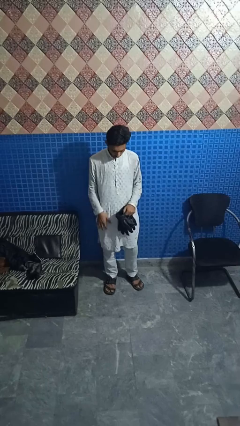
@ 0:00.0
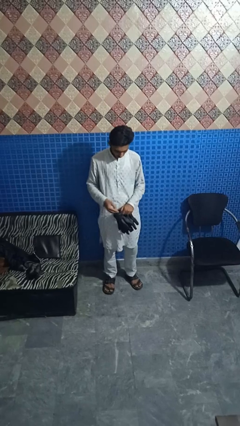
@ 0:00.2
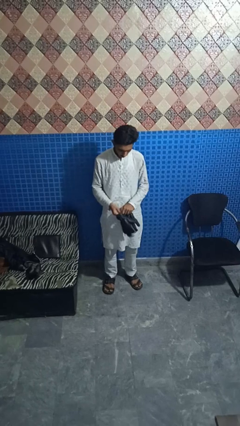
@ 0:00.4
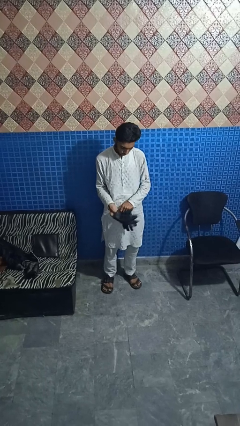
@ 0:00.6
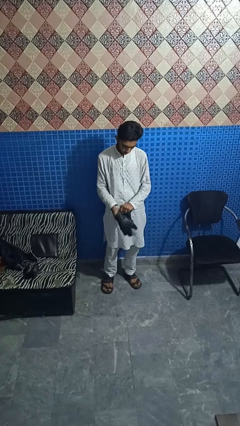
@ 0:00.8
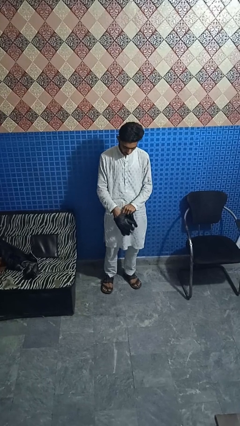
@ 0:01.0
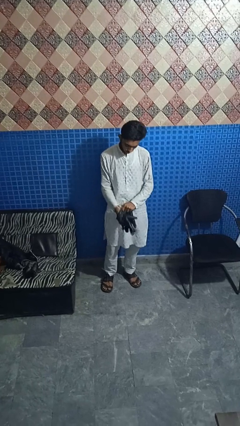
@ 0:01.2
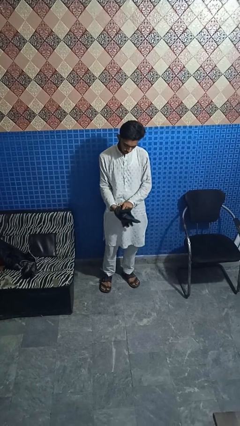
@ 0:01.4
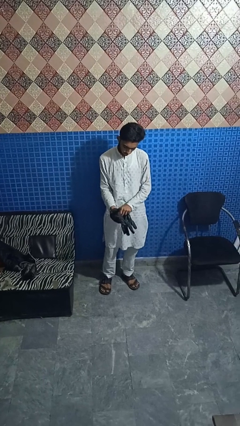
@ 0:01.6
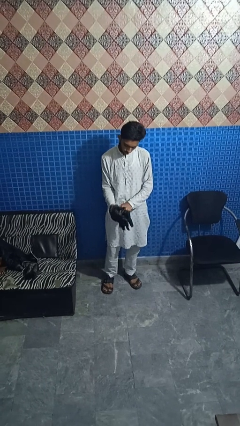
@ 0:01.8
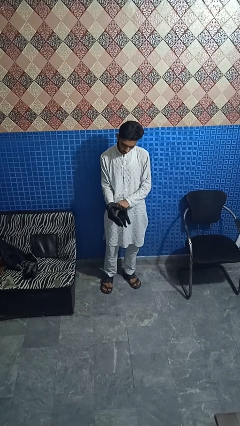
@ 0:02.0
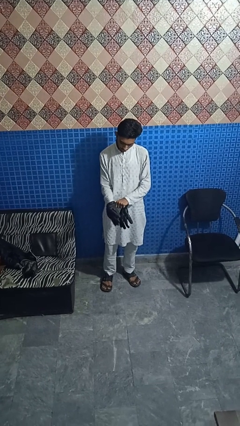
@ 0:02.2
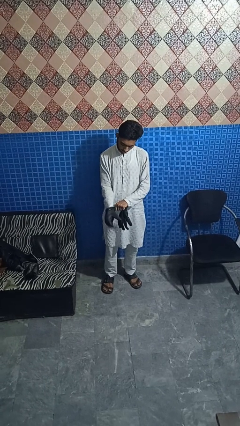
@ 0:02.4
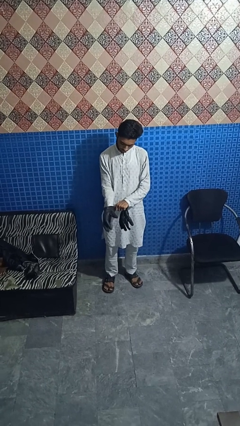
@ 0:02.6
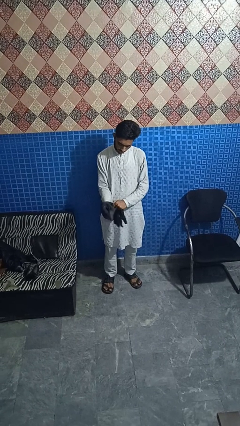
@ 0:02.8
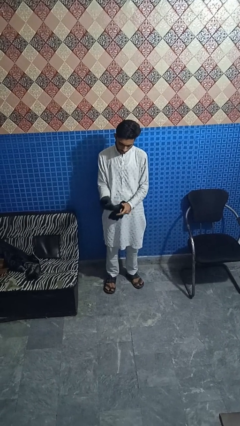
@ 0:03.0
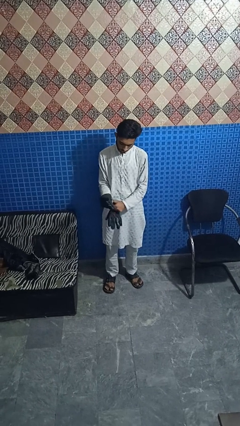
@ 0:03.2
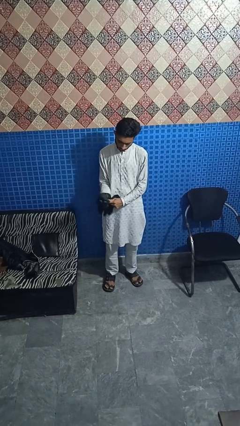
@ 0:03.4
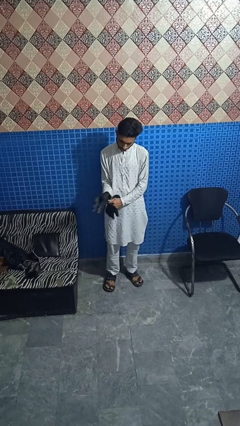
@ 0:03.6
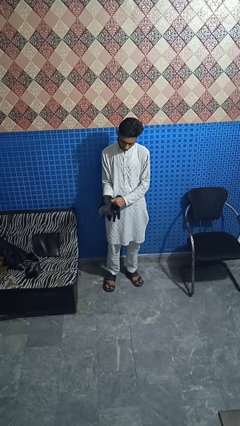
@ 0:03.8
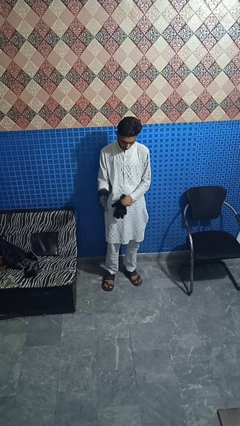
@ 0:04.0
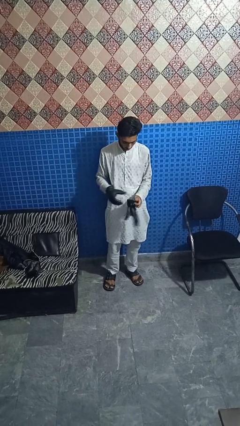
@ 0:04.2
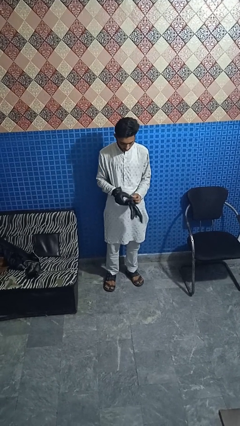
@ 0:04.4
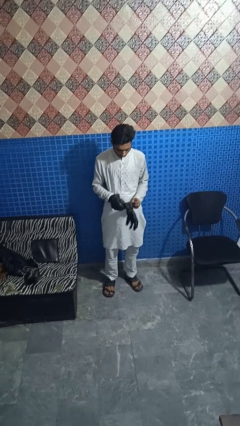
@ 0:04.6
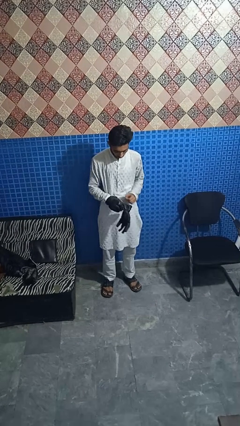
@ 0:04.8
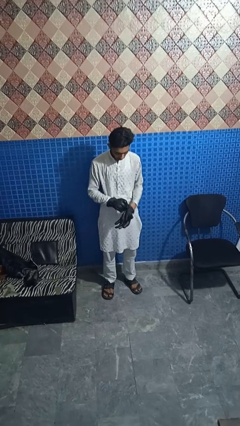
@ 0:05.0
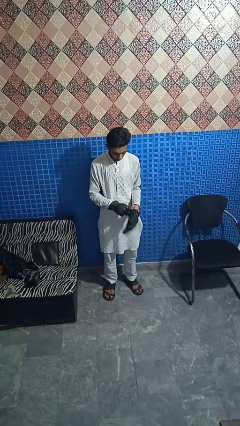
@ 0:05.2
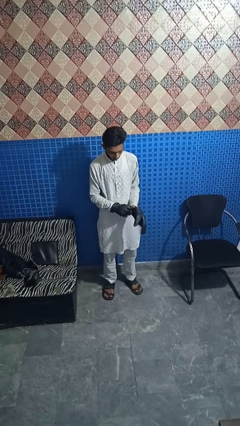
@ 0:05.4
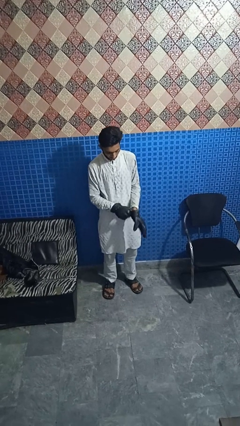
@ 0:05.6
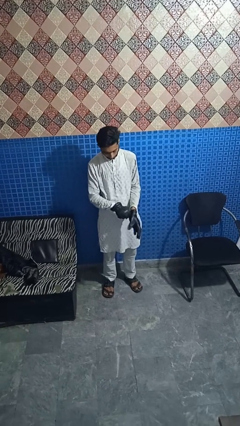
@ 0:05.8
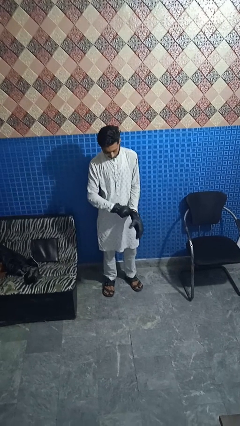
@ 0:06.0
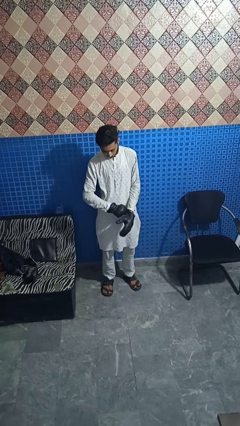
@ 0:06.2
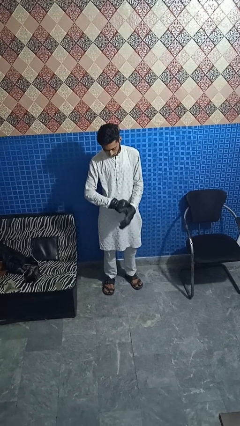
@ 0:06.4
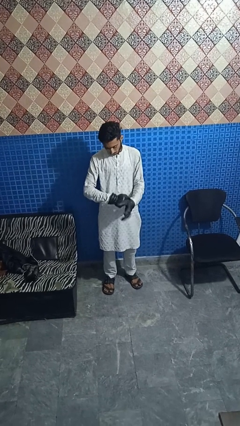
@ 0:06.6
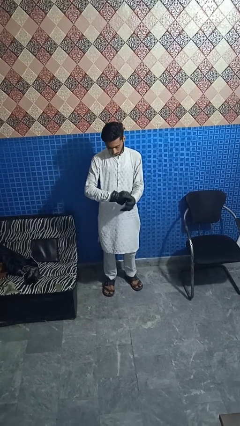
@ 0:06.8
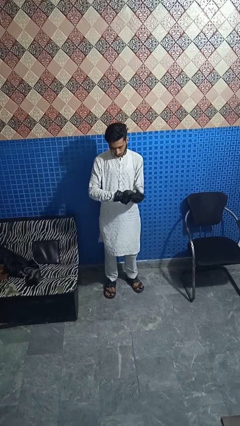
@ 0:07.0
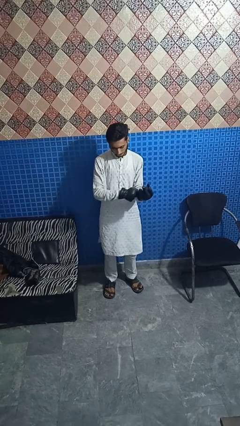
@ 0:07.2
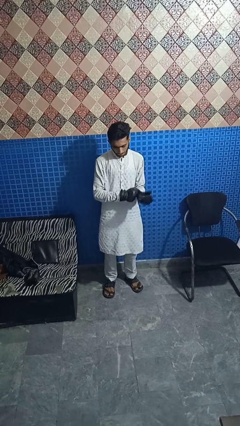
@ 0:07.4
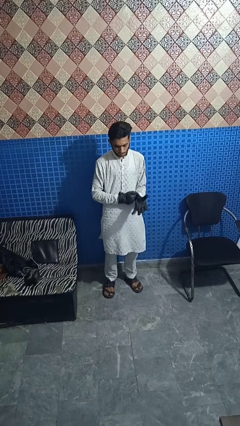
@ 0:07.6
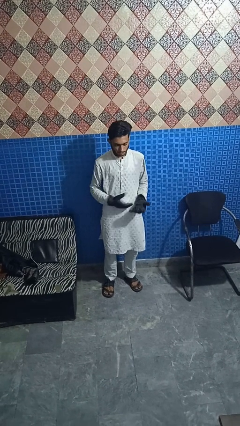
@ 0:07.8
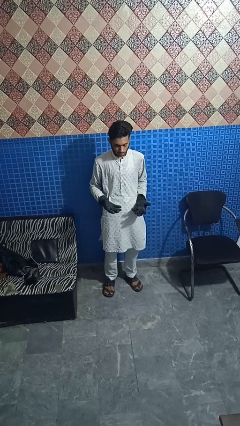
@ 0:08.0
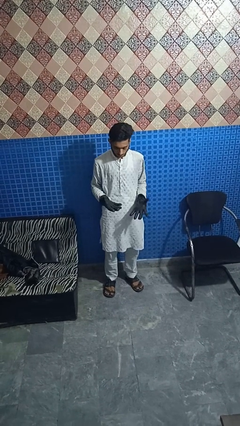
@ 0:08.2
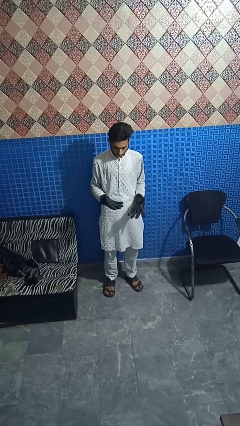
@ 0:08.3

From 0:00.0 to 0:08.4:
person puts on gloves

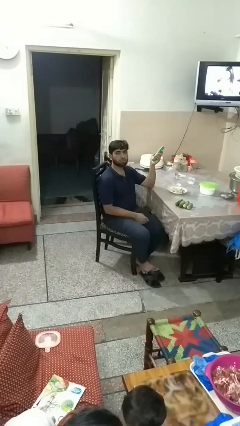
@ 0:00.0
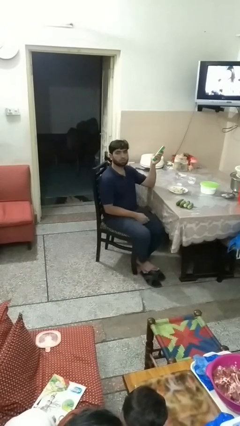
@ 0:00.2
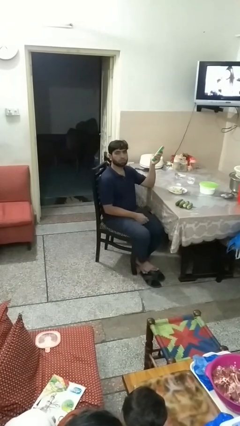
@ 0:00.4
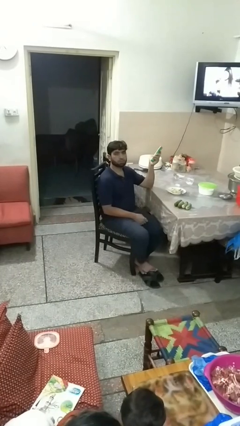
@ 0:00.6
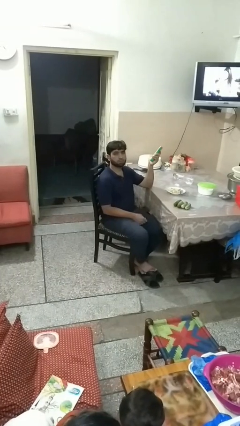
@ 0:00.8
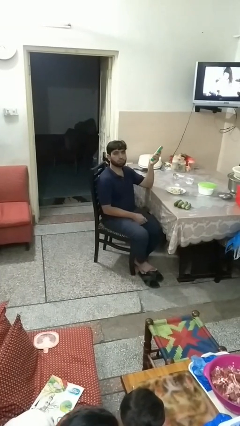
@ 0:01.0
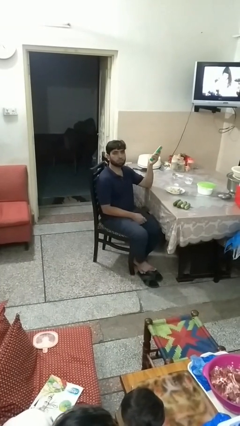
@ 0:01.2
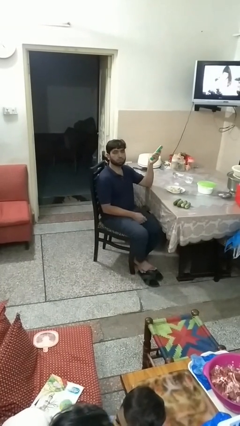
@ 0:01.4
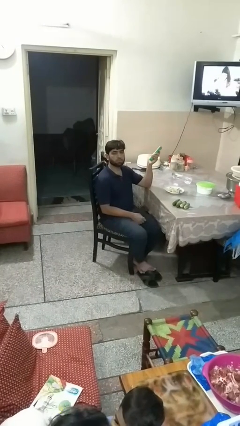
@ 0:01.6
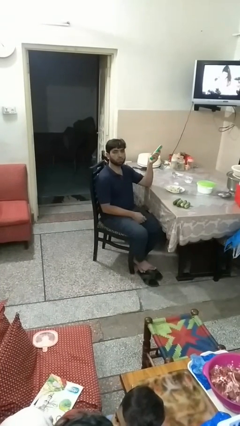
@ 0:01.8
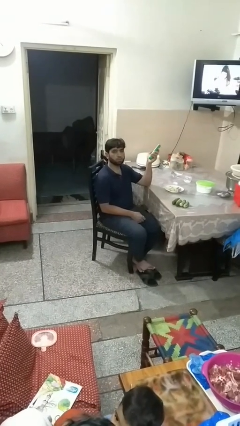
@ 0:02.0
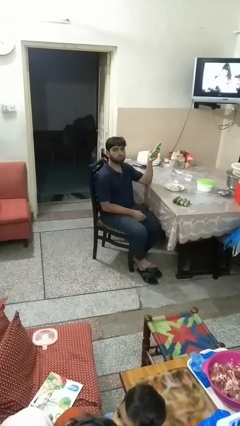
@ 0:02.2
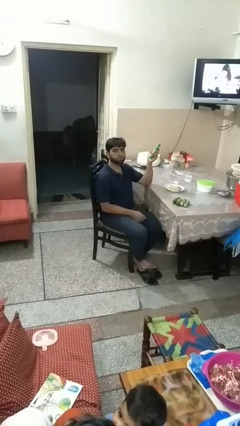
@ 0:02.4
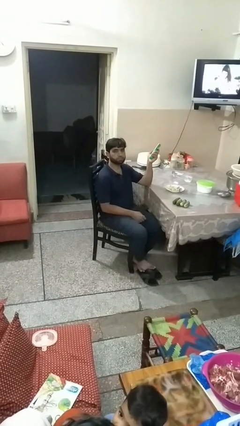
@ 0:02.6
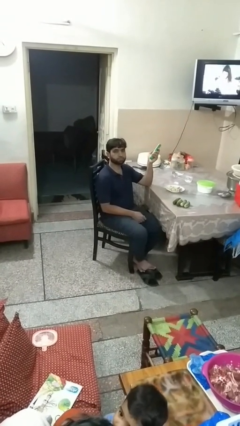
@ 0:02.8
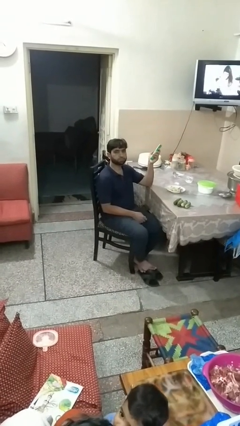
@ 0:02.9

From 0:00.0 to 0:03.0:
person uses television remote

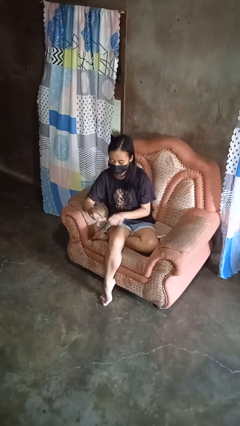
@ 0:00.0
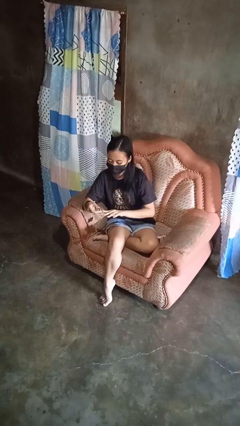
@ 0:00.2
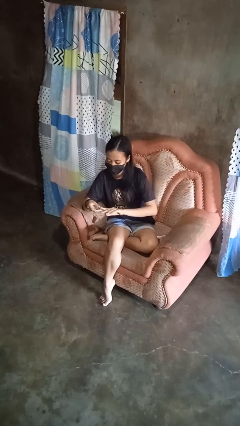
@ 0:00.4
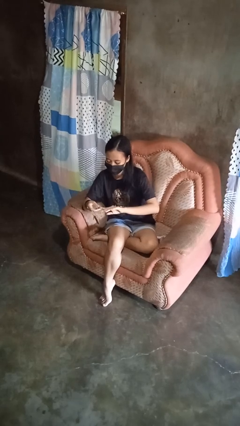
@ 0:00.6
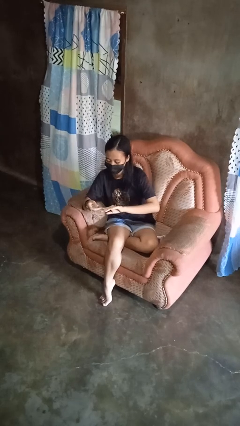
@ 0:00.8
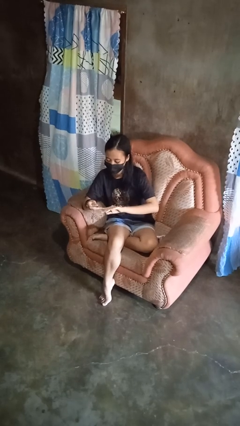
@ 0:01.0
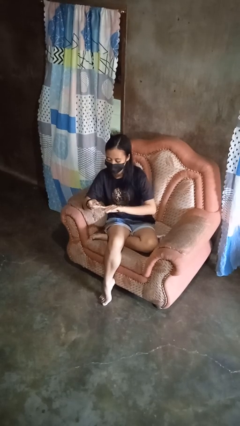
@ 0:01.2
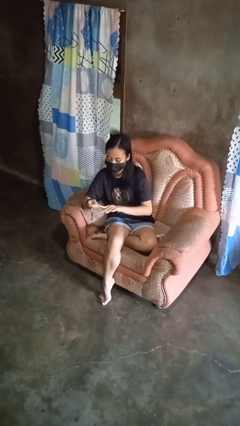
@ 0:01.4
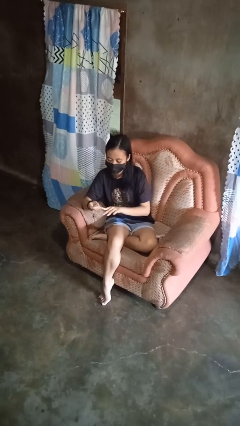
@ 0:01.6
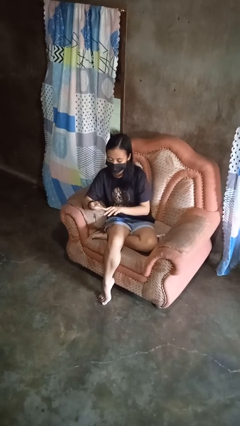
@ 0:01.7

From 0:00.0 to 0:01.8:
person clips fingernails

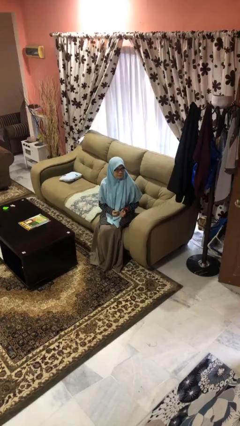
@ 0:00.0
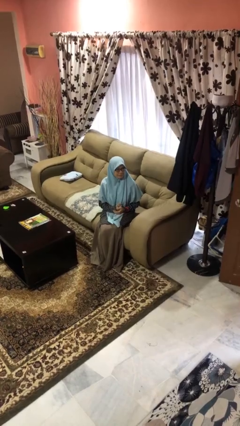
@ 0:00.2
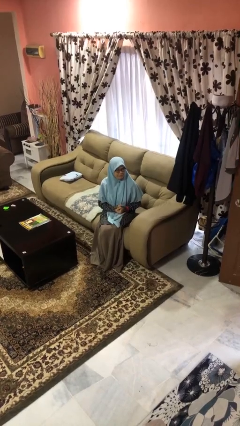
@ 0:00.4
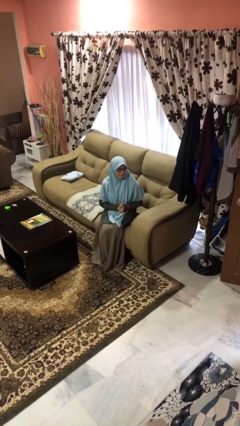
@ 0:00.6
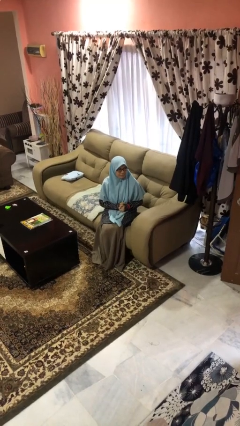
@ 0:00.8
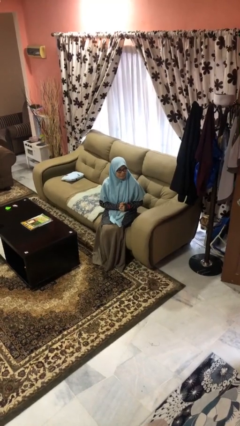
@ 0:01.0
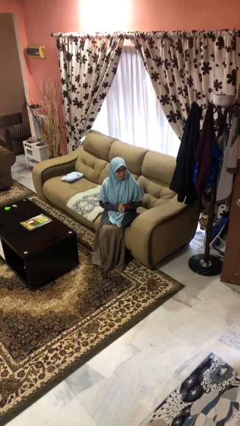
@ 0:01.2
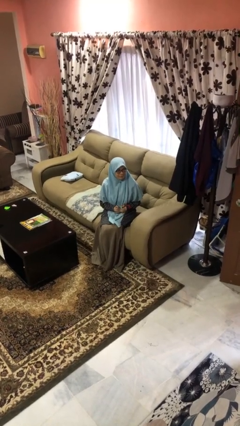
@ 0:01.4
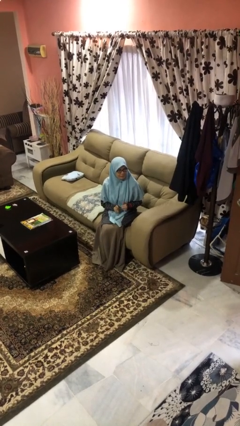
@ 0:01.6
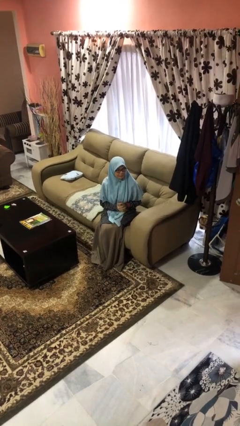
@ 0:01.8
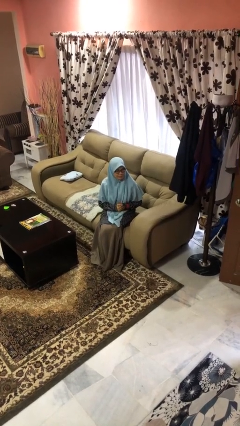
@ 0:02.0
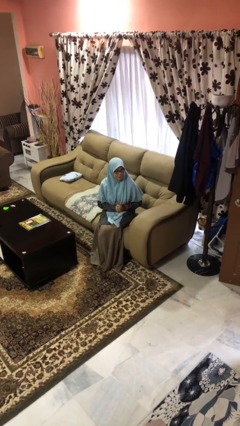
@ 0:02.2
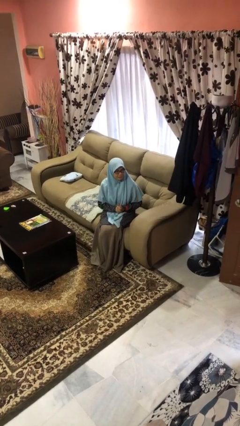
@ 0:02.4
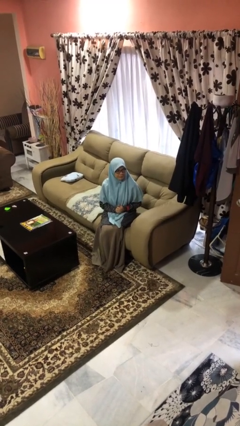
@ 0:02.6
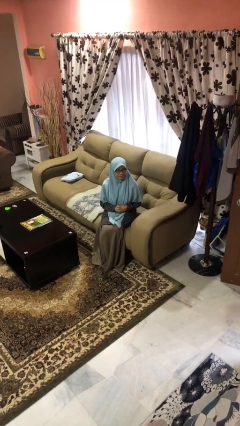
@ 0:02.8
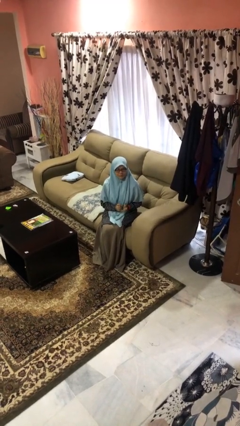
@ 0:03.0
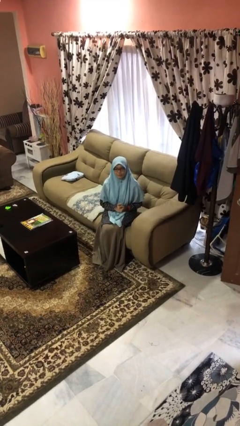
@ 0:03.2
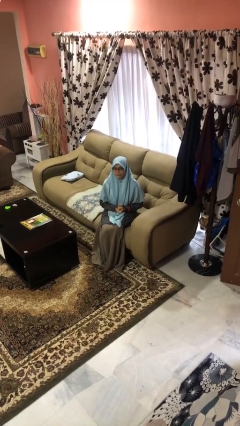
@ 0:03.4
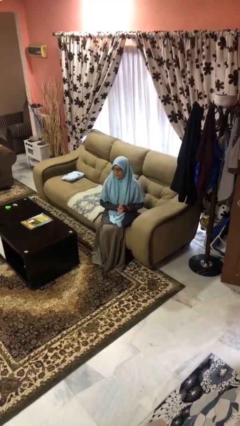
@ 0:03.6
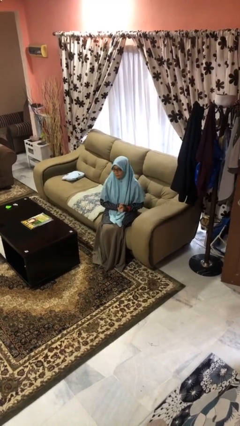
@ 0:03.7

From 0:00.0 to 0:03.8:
person cracks knuckles

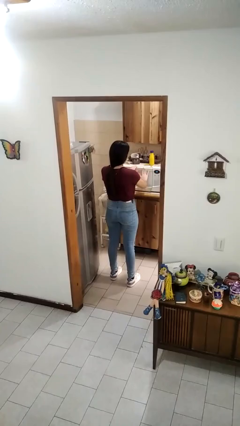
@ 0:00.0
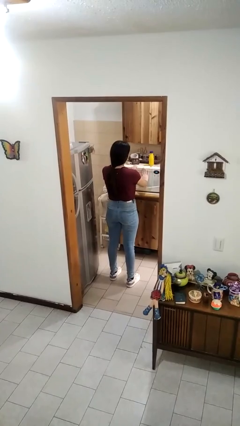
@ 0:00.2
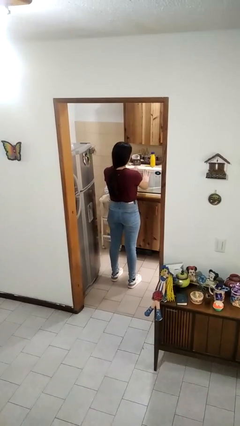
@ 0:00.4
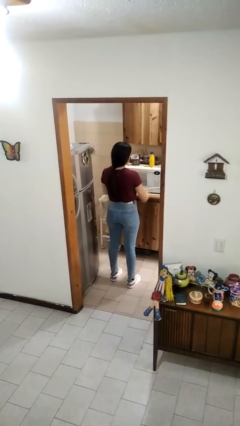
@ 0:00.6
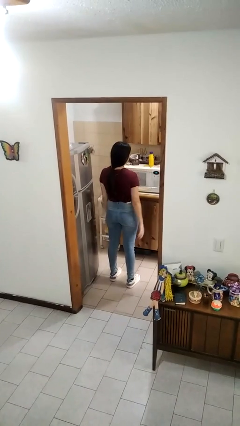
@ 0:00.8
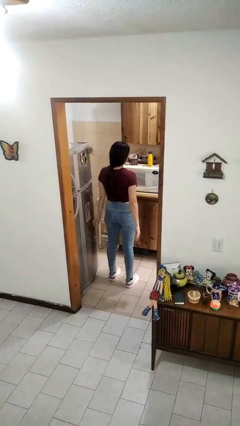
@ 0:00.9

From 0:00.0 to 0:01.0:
person closes microwave
